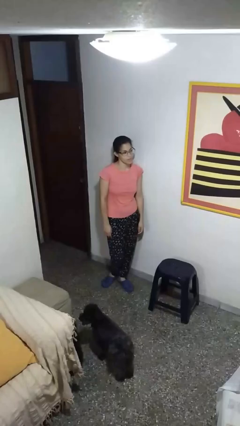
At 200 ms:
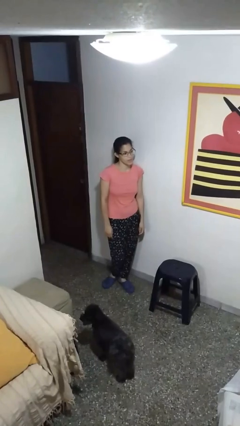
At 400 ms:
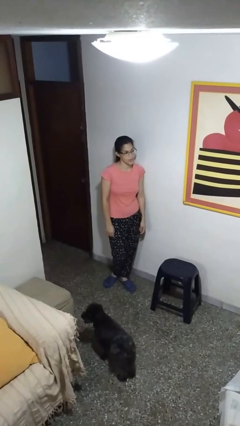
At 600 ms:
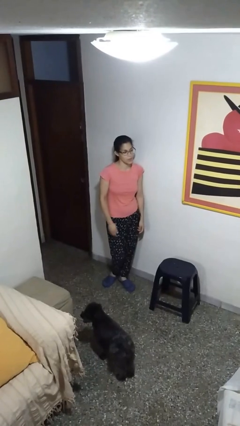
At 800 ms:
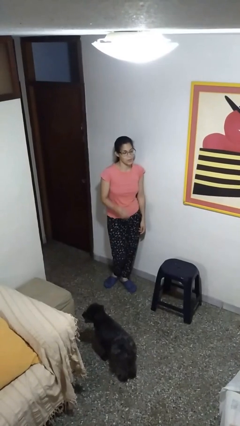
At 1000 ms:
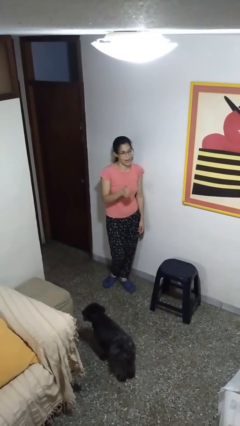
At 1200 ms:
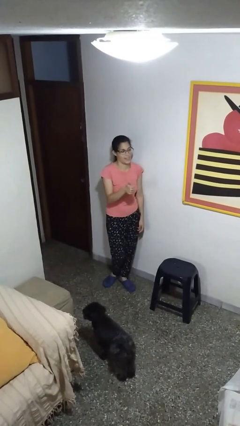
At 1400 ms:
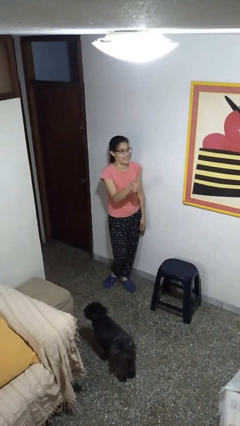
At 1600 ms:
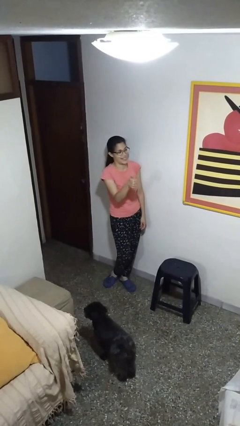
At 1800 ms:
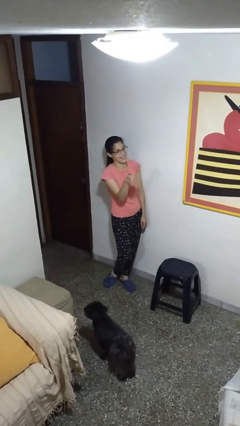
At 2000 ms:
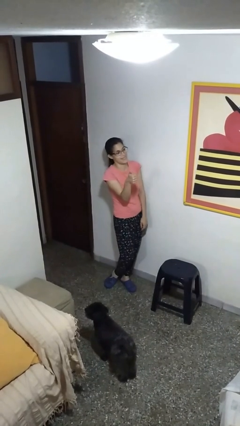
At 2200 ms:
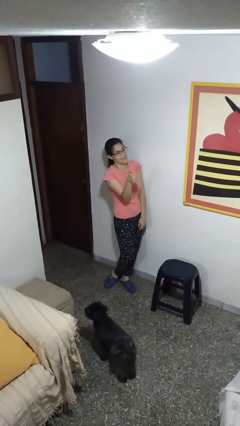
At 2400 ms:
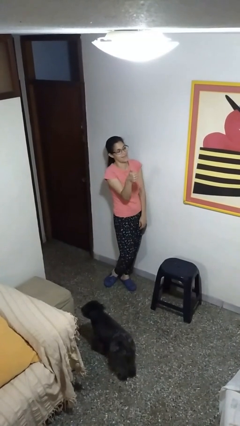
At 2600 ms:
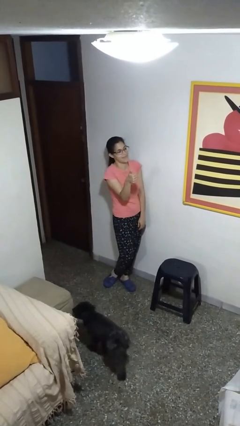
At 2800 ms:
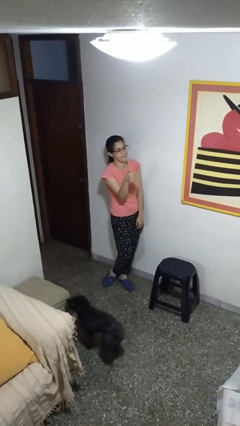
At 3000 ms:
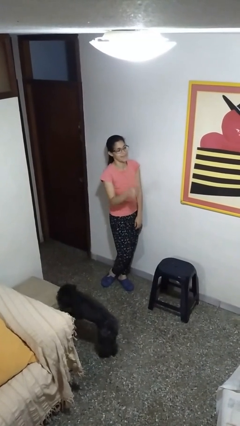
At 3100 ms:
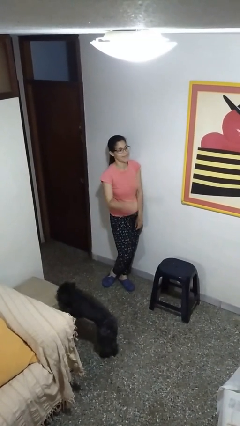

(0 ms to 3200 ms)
person gestures thumbs up

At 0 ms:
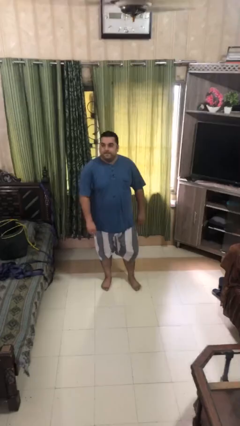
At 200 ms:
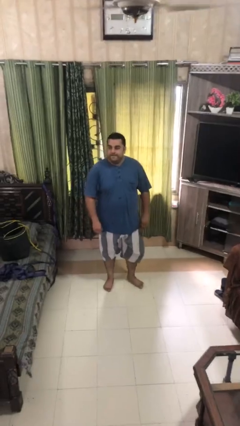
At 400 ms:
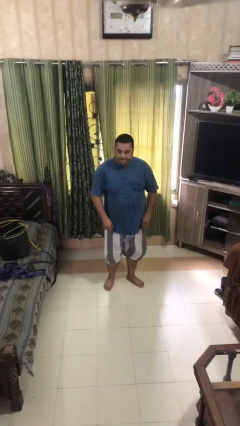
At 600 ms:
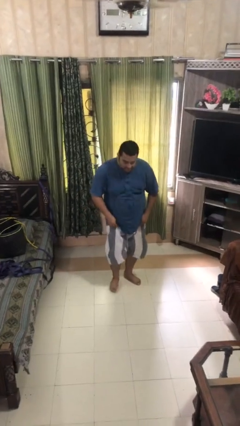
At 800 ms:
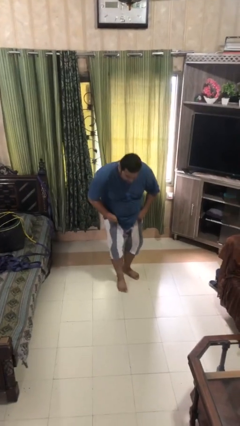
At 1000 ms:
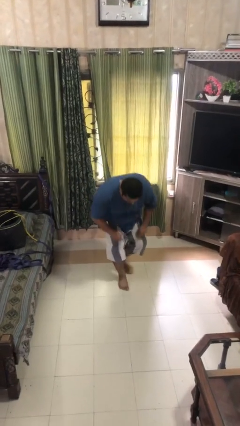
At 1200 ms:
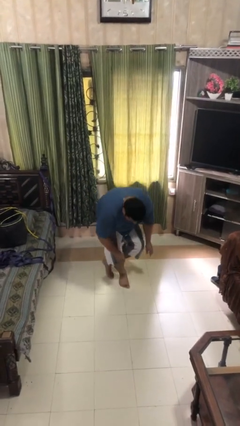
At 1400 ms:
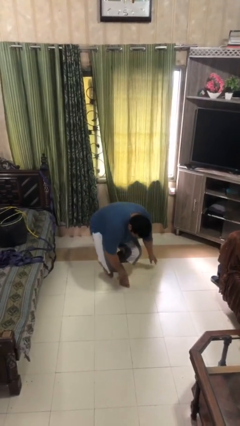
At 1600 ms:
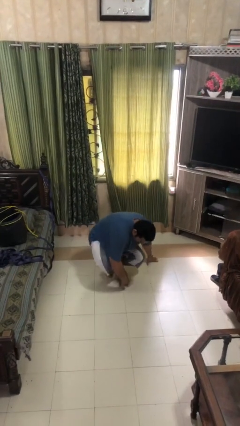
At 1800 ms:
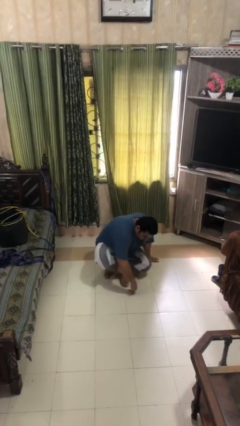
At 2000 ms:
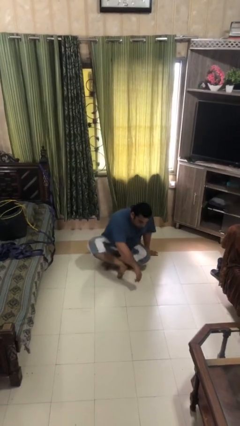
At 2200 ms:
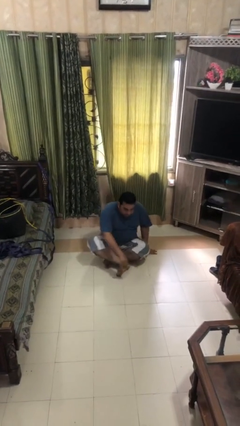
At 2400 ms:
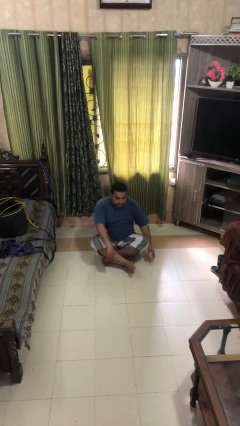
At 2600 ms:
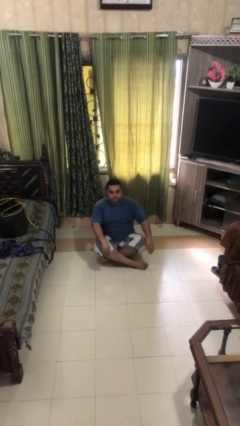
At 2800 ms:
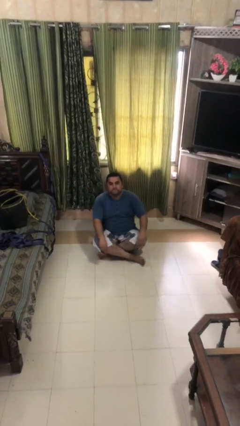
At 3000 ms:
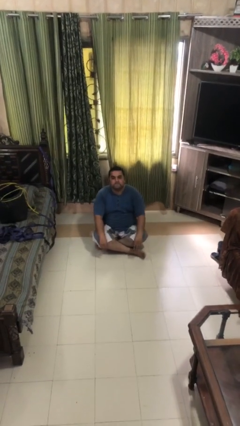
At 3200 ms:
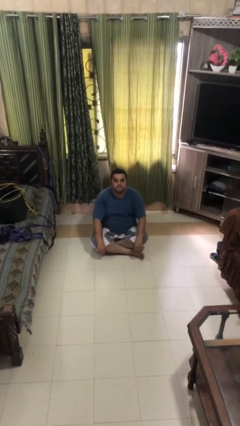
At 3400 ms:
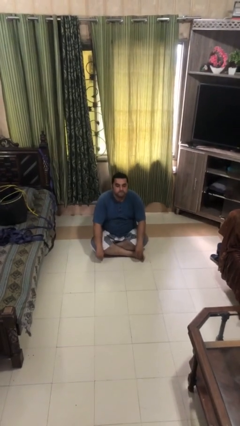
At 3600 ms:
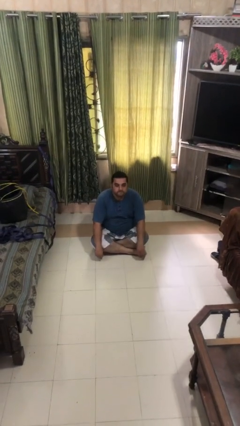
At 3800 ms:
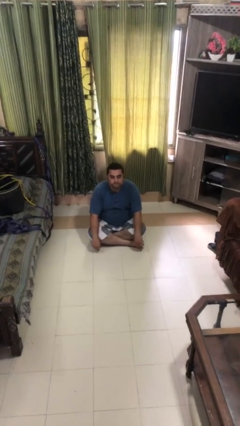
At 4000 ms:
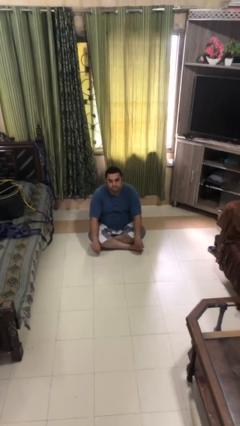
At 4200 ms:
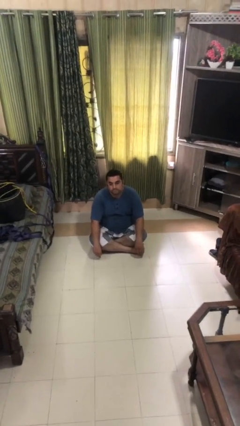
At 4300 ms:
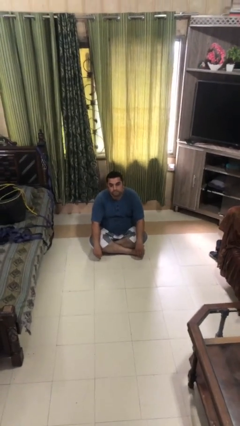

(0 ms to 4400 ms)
person sits crisscross

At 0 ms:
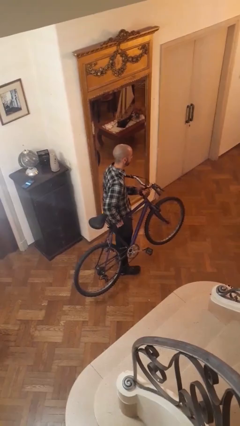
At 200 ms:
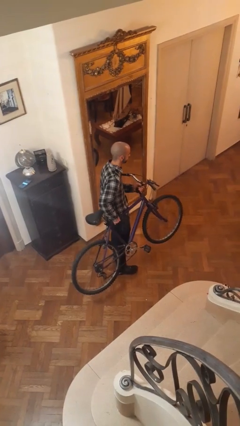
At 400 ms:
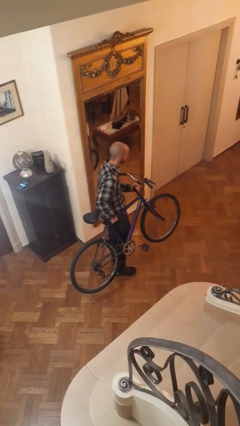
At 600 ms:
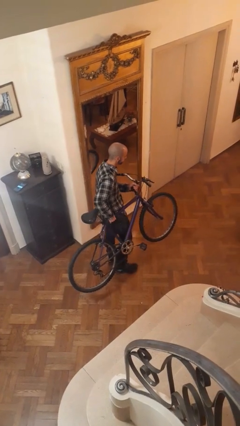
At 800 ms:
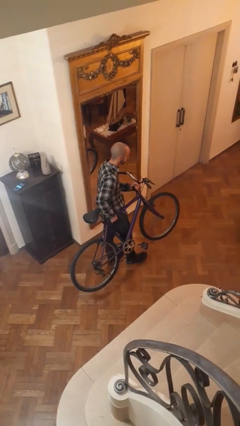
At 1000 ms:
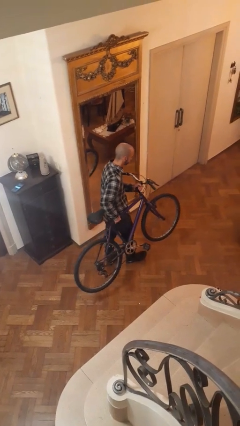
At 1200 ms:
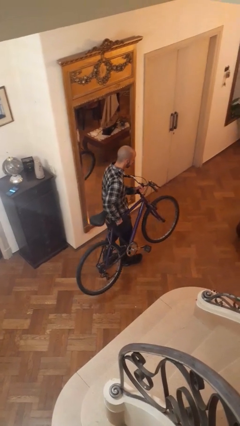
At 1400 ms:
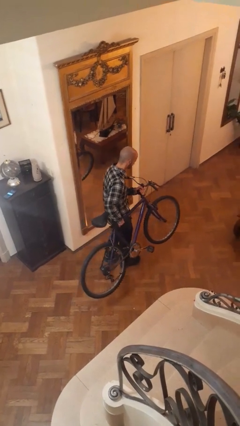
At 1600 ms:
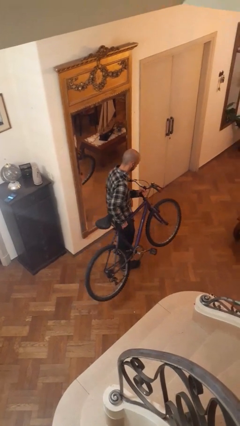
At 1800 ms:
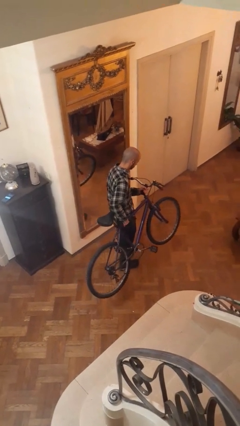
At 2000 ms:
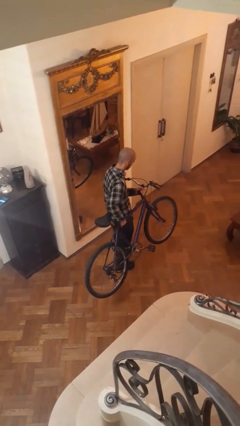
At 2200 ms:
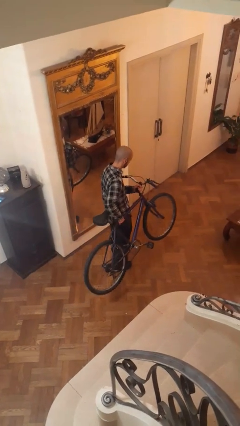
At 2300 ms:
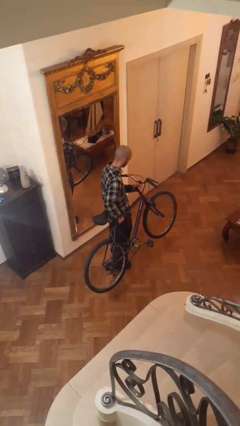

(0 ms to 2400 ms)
person carries bicycle

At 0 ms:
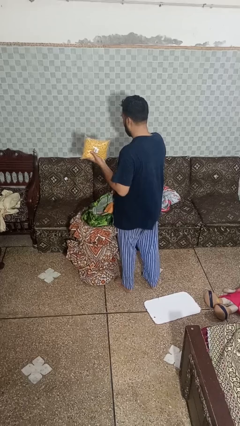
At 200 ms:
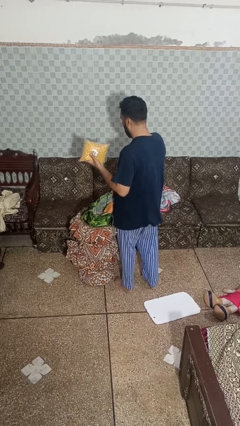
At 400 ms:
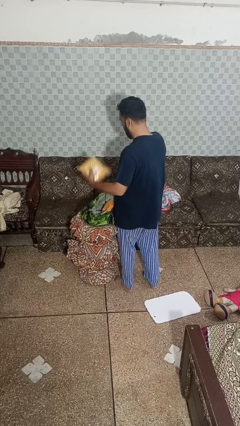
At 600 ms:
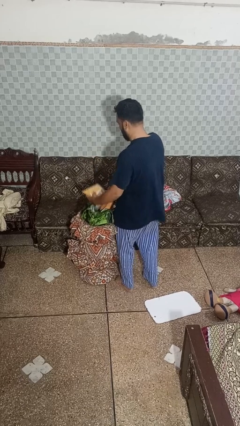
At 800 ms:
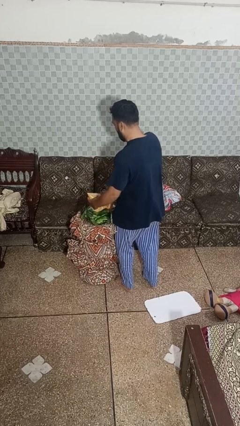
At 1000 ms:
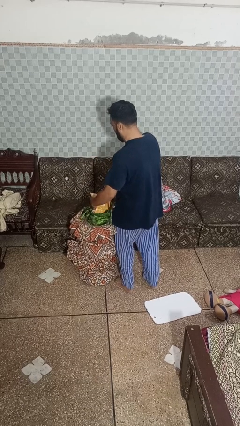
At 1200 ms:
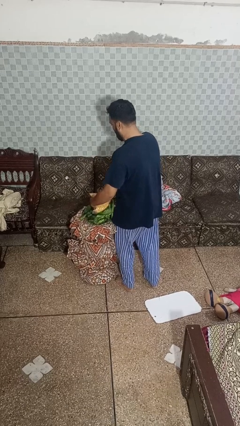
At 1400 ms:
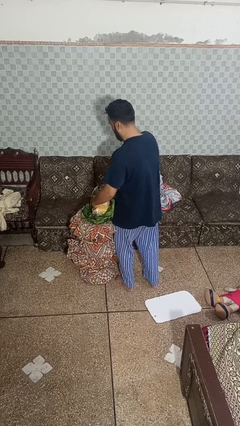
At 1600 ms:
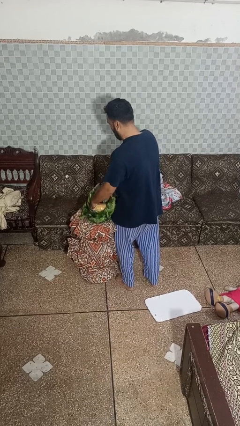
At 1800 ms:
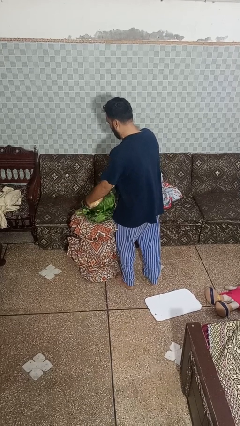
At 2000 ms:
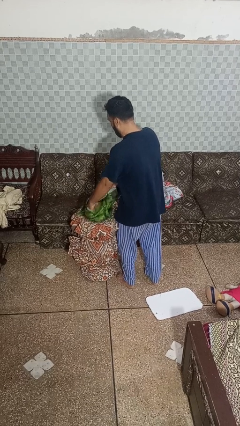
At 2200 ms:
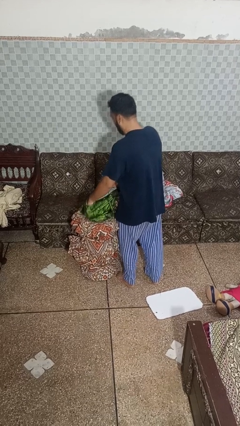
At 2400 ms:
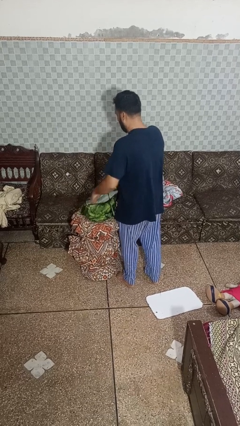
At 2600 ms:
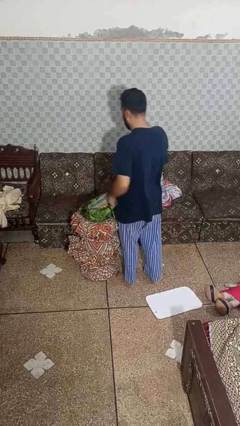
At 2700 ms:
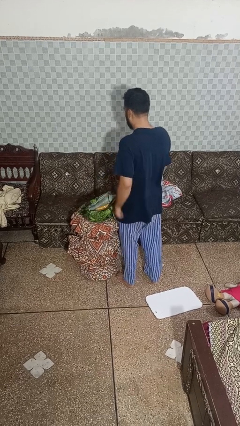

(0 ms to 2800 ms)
person puts object into bag

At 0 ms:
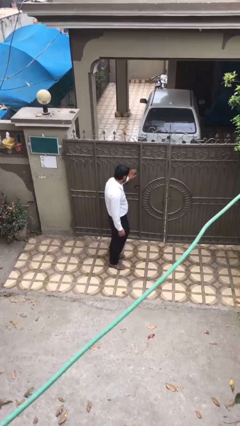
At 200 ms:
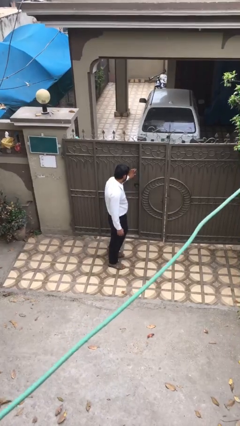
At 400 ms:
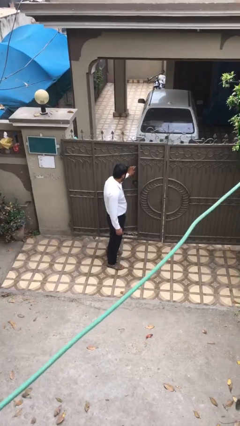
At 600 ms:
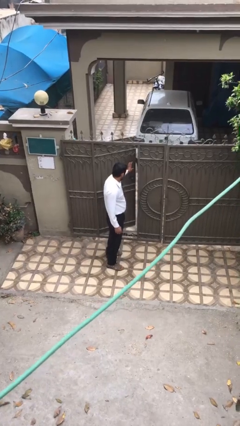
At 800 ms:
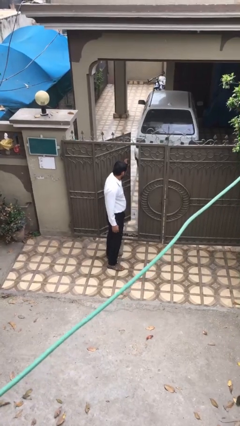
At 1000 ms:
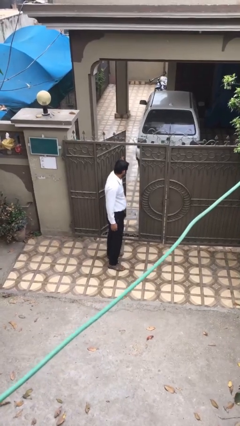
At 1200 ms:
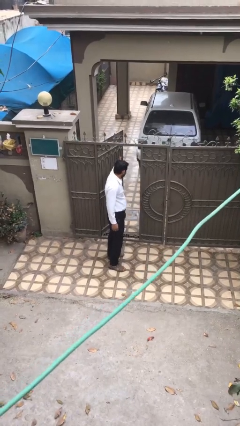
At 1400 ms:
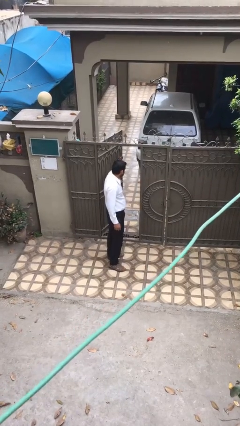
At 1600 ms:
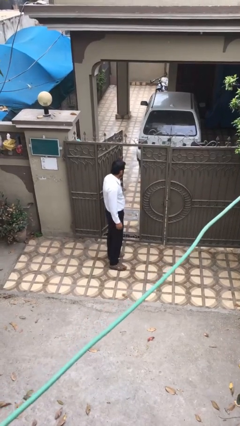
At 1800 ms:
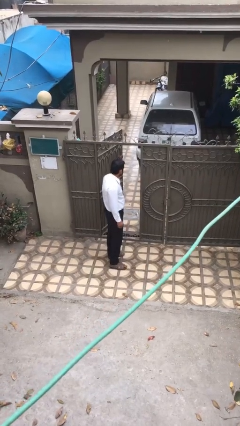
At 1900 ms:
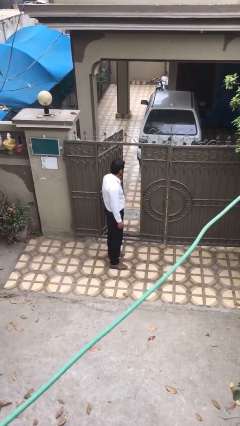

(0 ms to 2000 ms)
person opens facility door

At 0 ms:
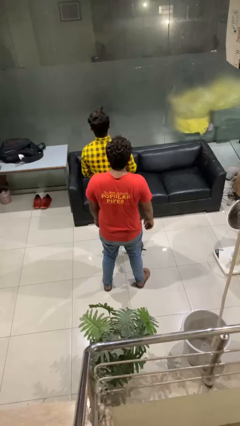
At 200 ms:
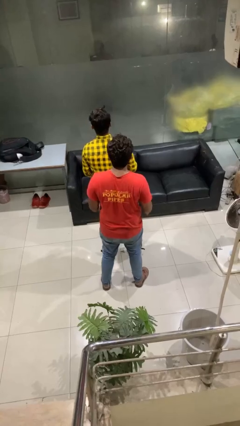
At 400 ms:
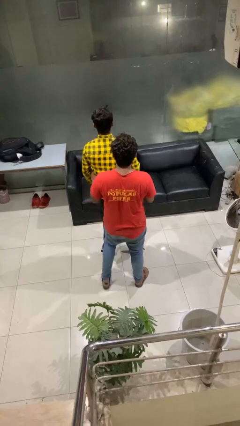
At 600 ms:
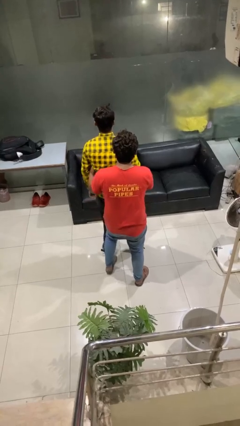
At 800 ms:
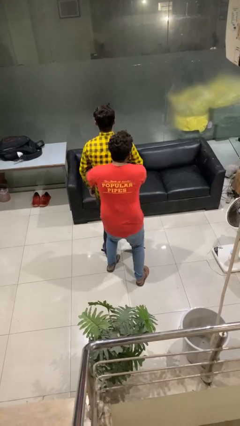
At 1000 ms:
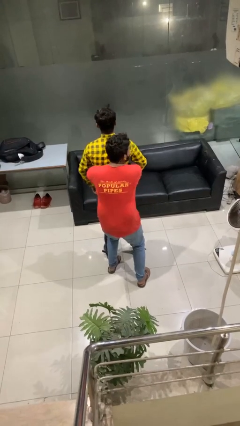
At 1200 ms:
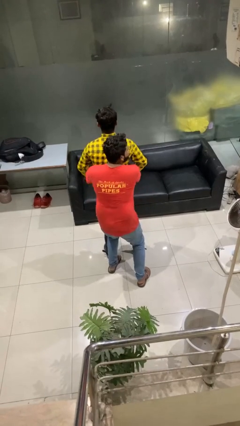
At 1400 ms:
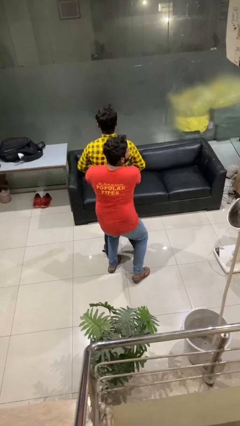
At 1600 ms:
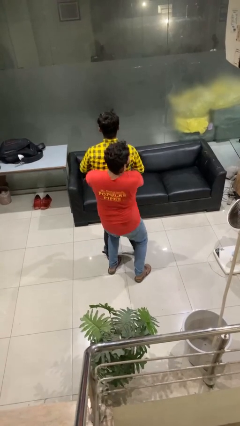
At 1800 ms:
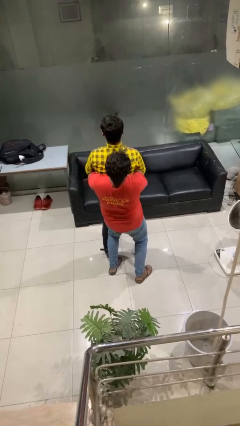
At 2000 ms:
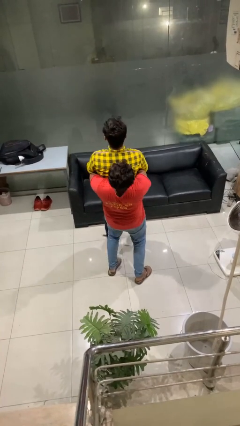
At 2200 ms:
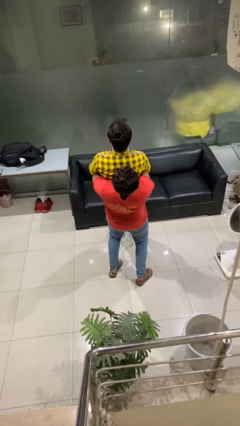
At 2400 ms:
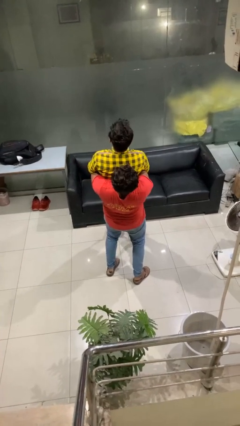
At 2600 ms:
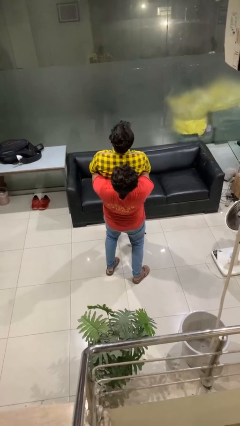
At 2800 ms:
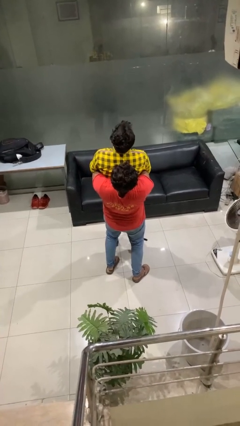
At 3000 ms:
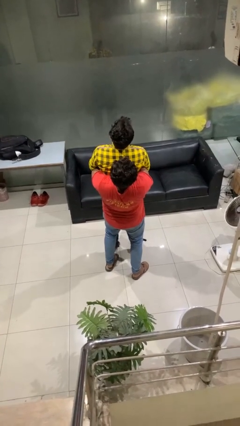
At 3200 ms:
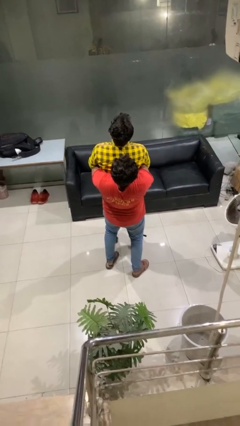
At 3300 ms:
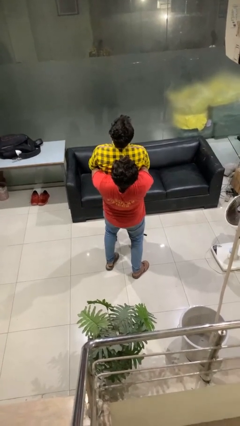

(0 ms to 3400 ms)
person picks up person
